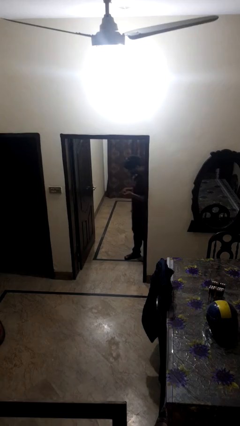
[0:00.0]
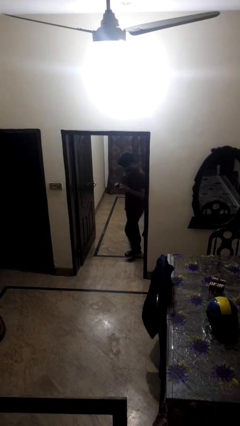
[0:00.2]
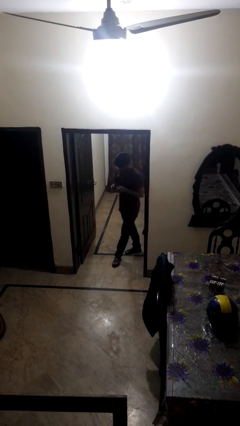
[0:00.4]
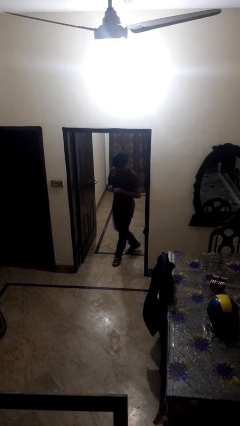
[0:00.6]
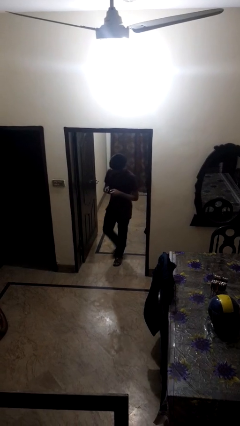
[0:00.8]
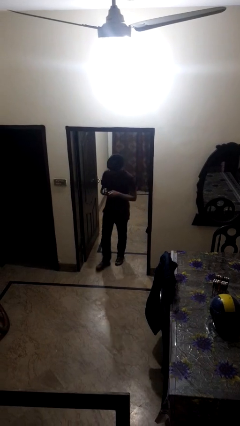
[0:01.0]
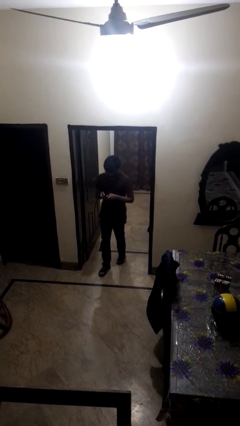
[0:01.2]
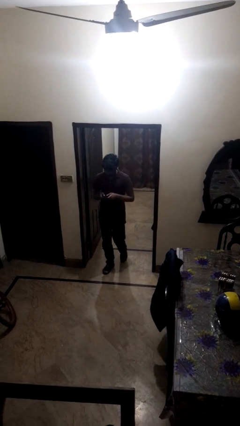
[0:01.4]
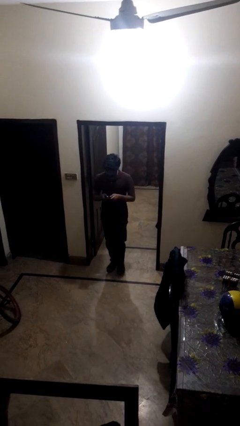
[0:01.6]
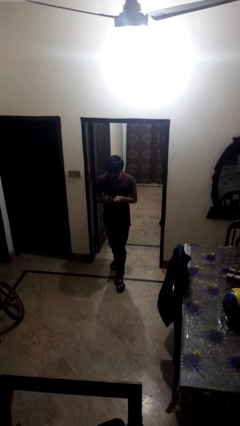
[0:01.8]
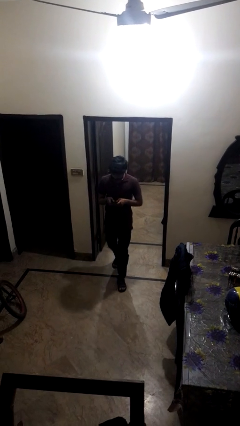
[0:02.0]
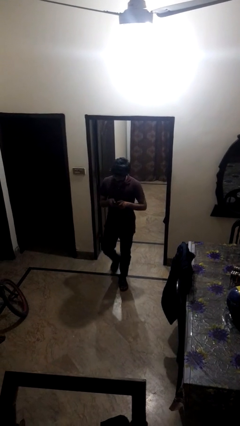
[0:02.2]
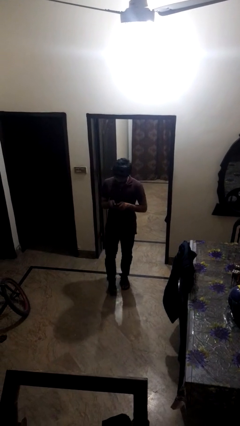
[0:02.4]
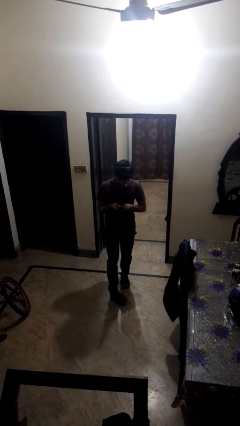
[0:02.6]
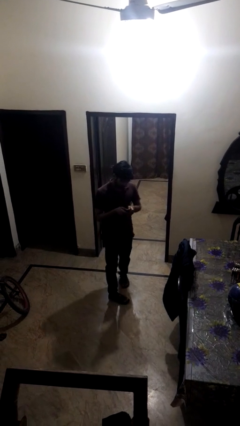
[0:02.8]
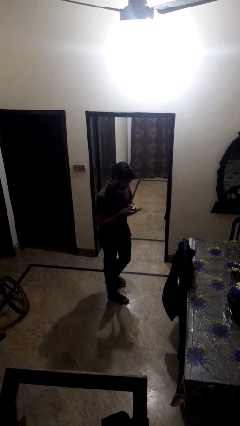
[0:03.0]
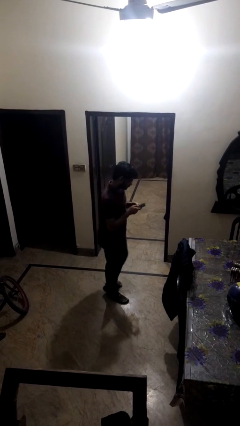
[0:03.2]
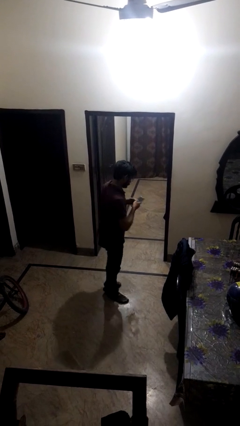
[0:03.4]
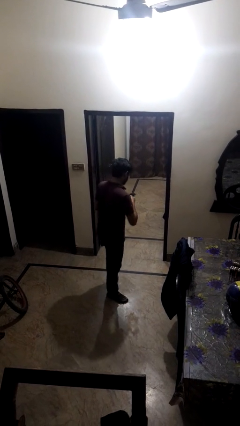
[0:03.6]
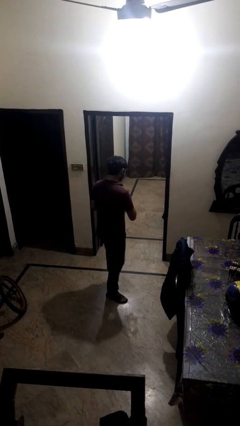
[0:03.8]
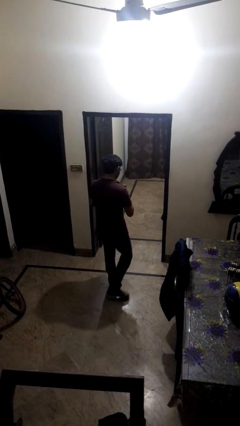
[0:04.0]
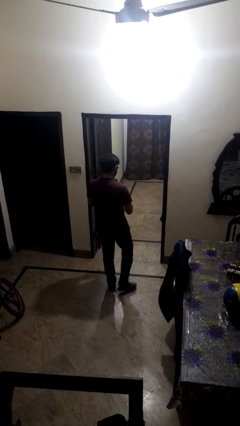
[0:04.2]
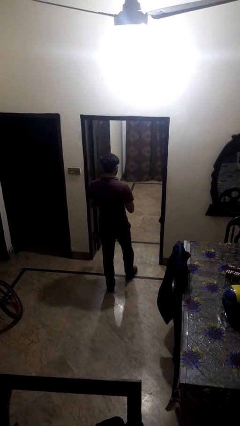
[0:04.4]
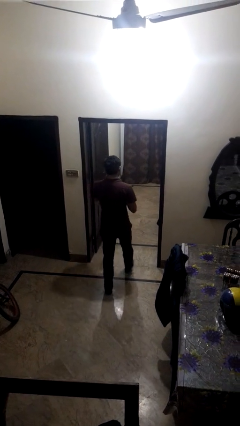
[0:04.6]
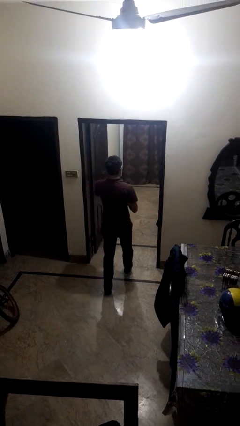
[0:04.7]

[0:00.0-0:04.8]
person enters scene through structure

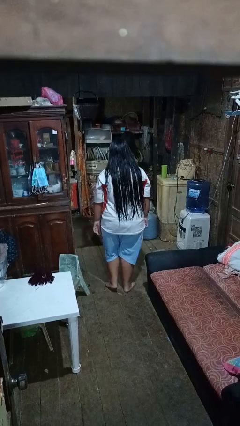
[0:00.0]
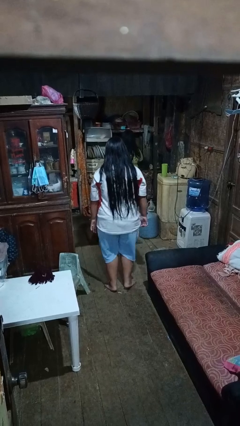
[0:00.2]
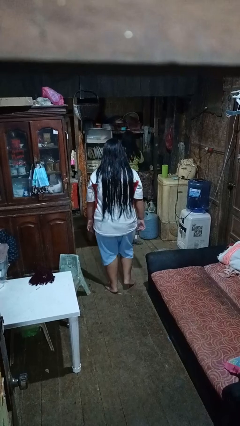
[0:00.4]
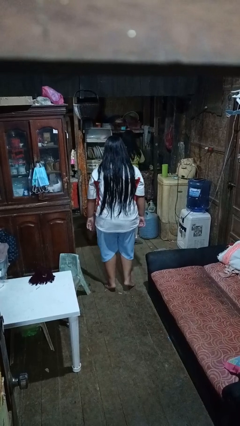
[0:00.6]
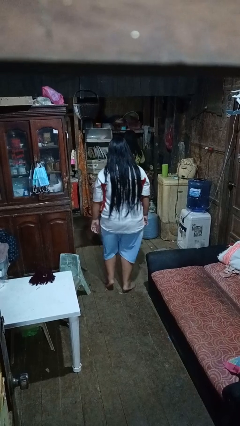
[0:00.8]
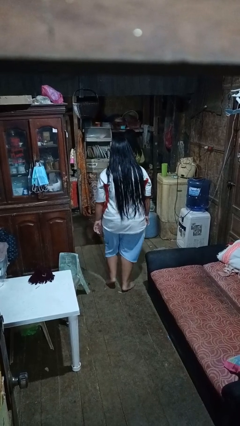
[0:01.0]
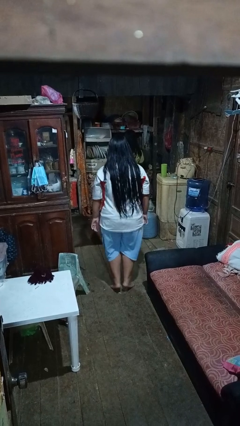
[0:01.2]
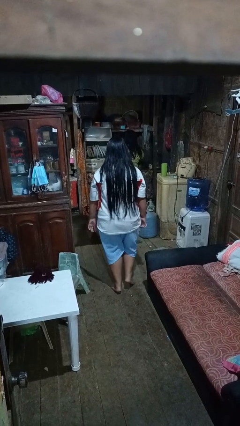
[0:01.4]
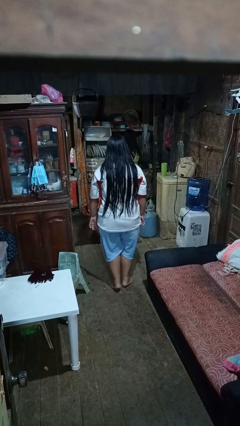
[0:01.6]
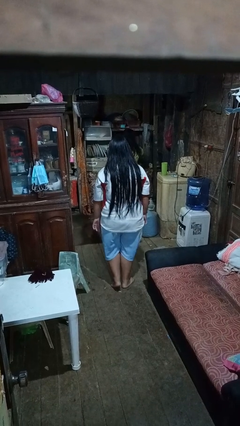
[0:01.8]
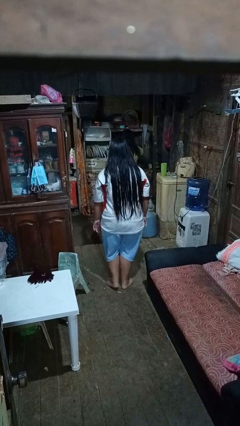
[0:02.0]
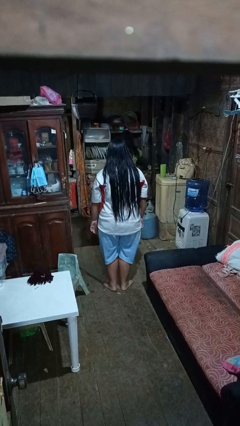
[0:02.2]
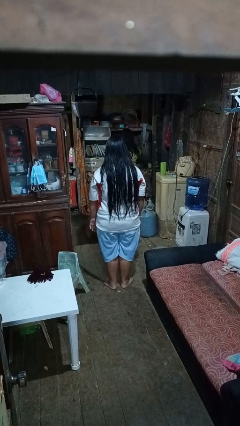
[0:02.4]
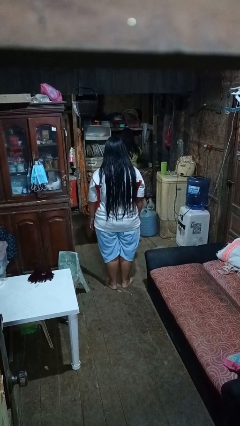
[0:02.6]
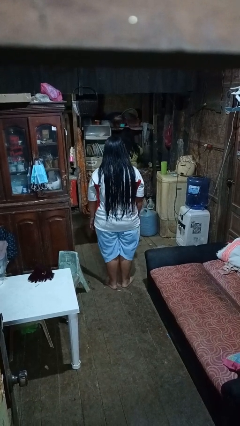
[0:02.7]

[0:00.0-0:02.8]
person walks tiptoe

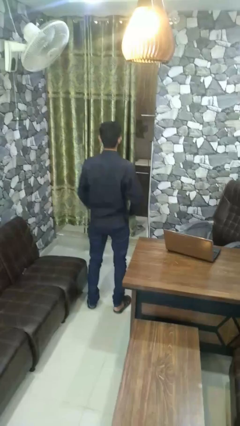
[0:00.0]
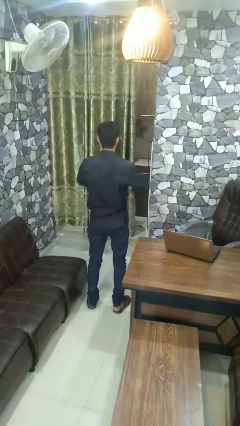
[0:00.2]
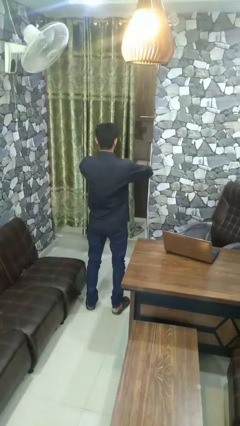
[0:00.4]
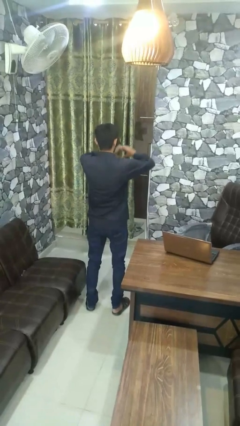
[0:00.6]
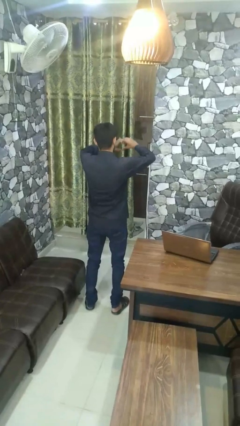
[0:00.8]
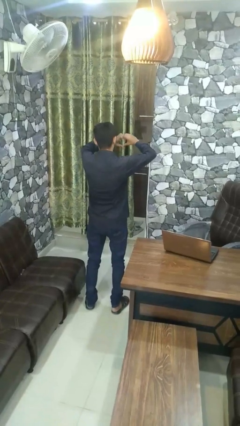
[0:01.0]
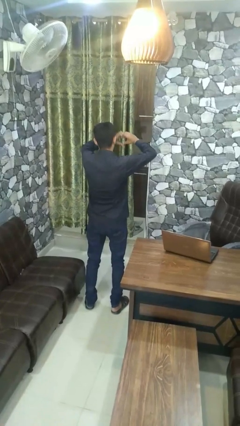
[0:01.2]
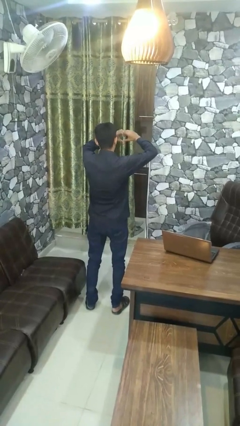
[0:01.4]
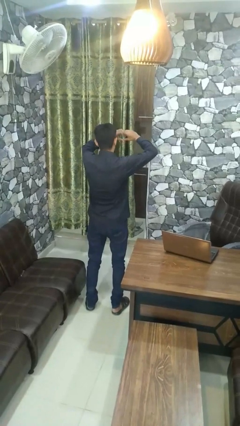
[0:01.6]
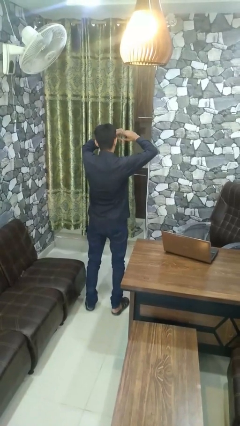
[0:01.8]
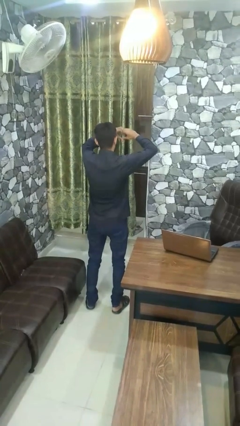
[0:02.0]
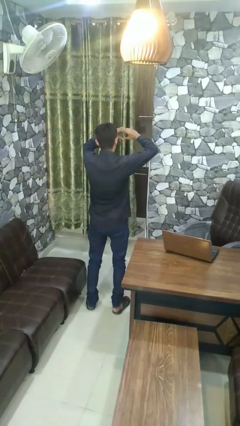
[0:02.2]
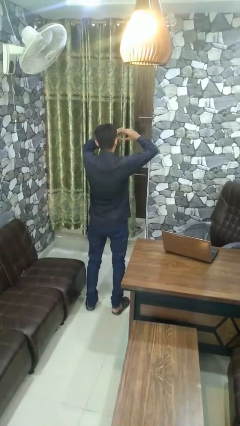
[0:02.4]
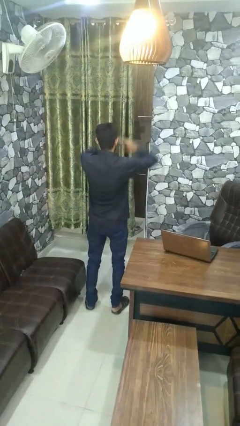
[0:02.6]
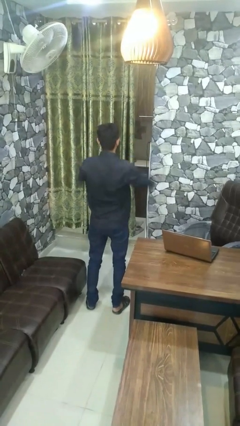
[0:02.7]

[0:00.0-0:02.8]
person gestures heart

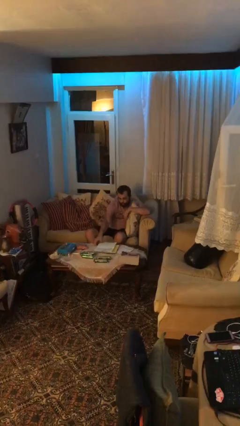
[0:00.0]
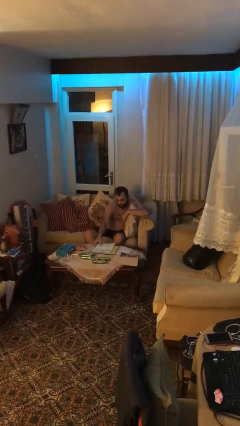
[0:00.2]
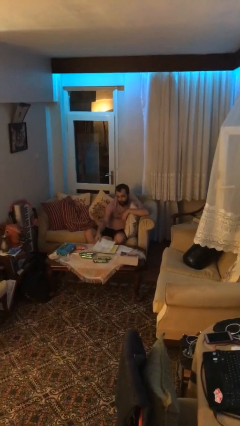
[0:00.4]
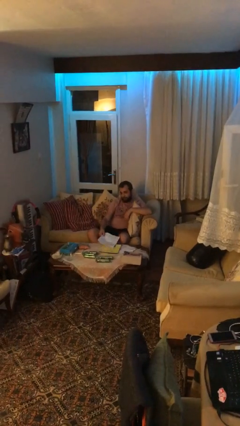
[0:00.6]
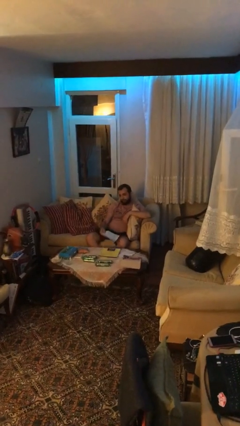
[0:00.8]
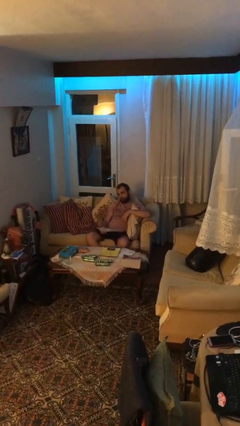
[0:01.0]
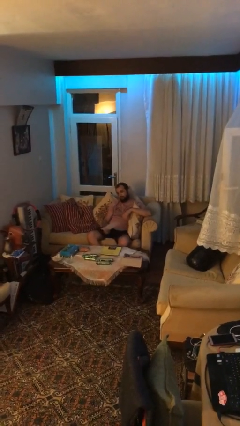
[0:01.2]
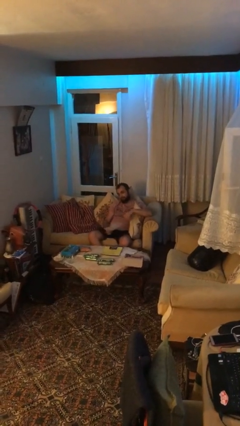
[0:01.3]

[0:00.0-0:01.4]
person picks up object from table

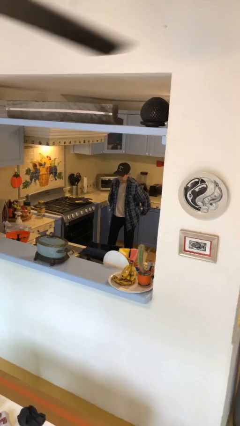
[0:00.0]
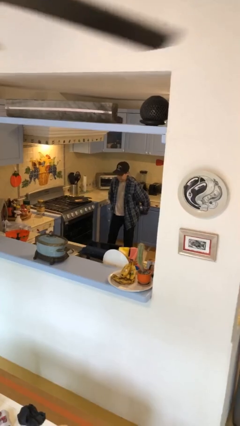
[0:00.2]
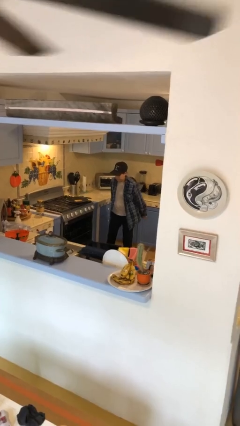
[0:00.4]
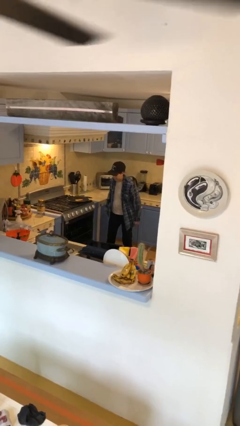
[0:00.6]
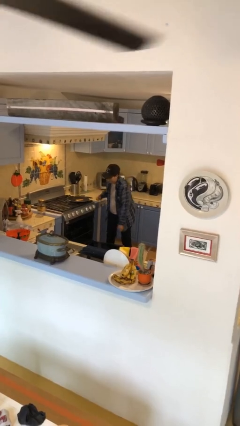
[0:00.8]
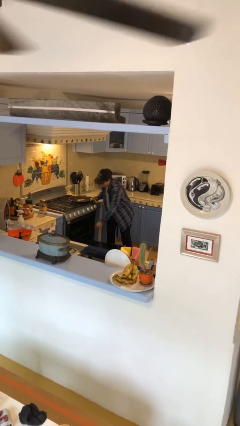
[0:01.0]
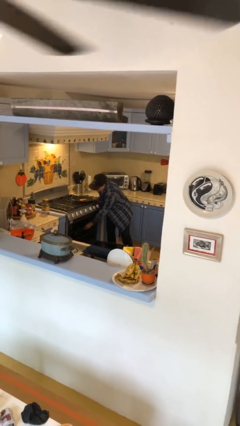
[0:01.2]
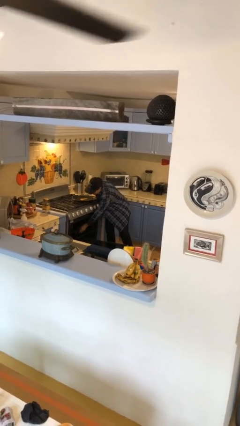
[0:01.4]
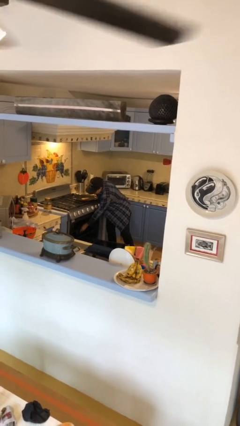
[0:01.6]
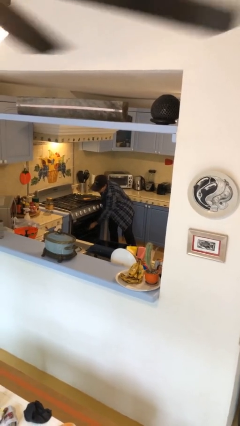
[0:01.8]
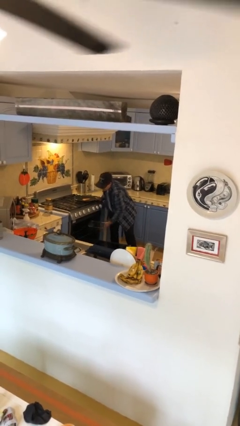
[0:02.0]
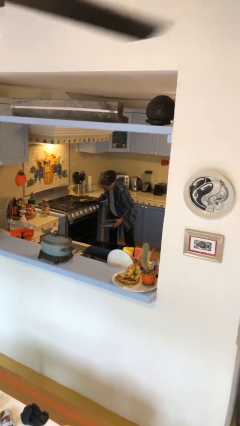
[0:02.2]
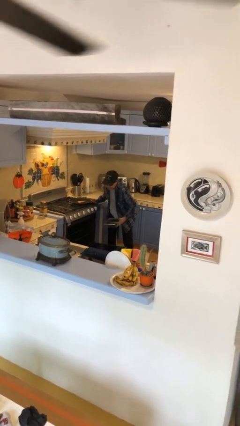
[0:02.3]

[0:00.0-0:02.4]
person takes object from oven

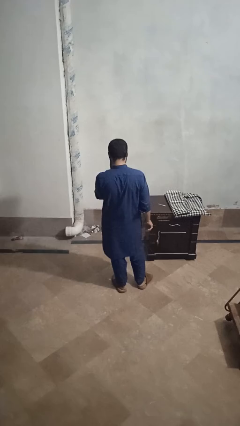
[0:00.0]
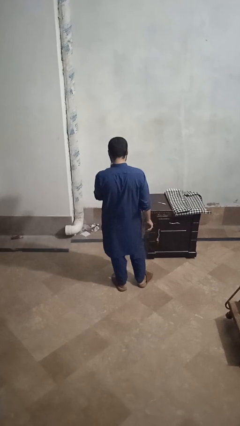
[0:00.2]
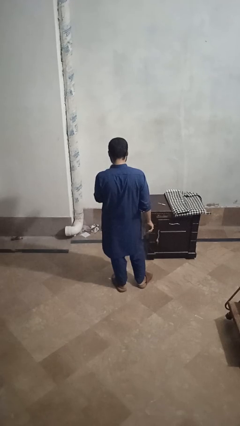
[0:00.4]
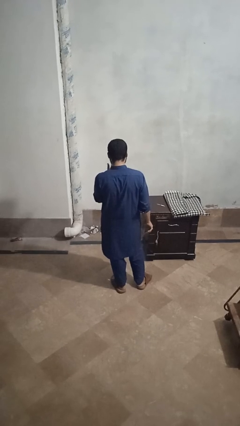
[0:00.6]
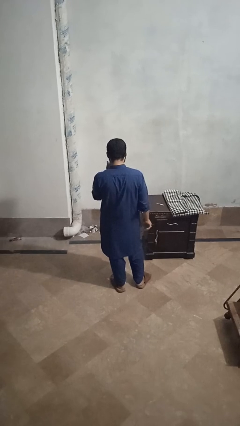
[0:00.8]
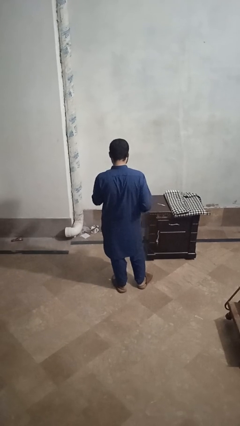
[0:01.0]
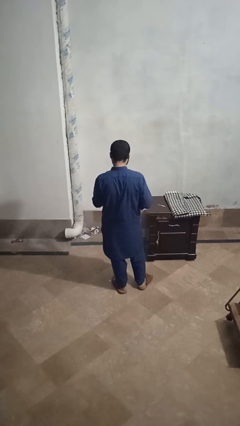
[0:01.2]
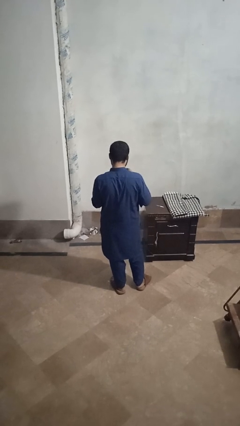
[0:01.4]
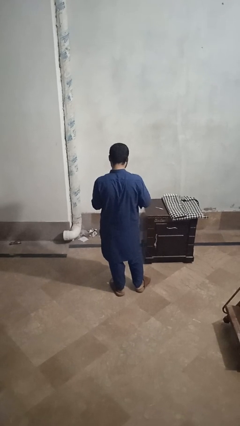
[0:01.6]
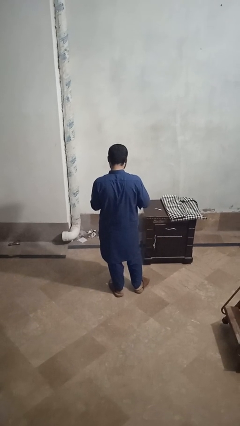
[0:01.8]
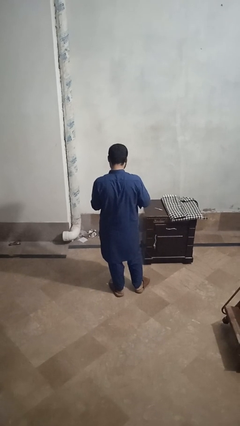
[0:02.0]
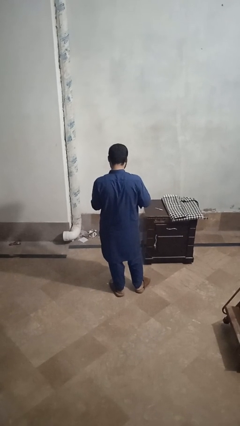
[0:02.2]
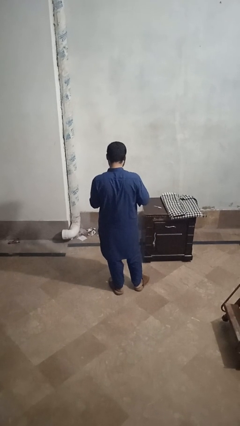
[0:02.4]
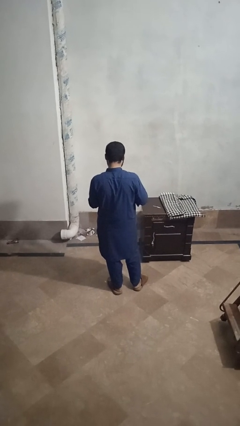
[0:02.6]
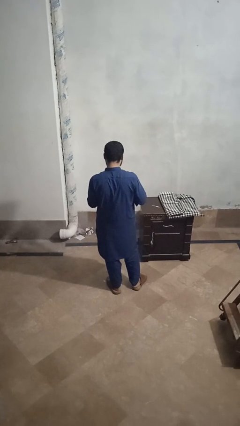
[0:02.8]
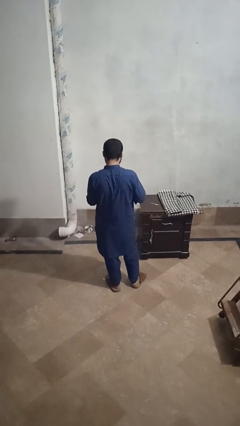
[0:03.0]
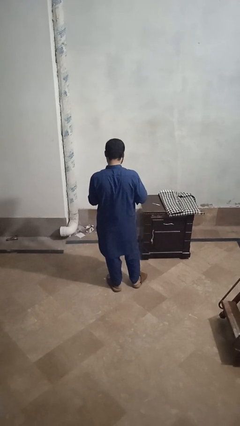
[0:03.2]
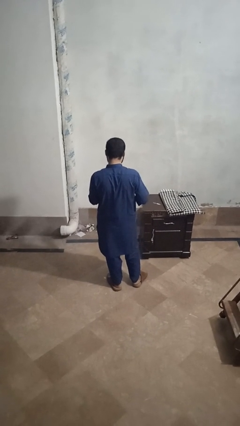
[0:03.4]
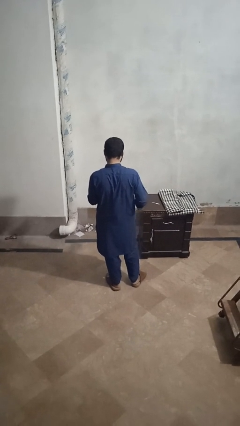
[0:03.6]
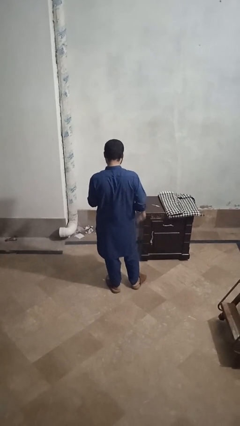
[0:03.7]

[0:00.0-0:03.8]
person files fingernails
